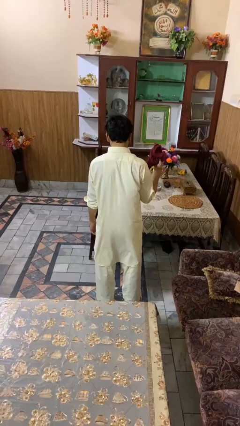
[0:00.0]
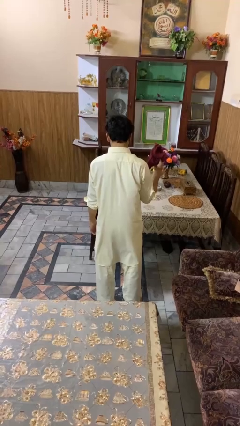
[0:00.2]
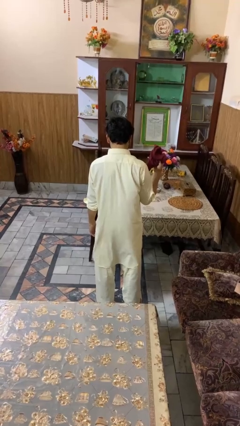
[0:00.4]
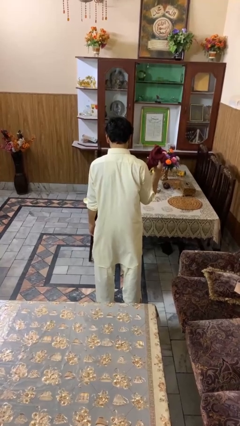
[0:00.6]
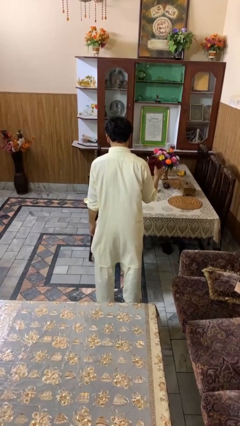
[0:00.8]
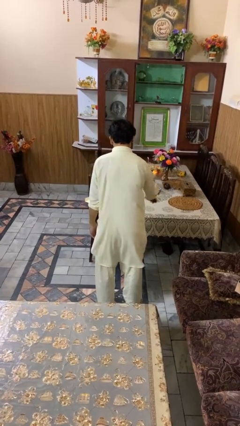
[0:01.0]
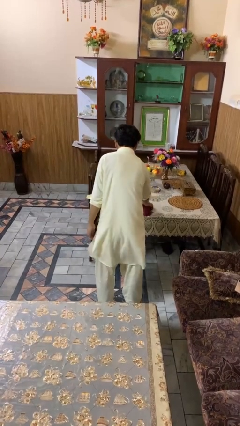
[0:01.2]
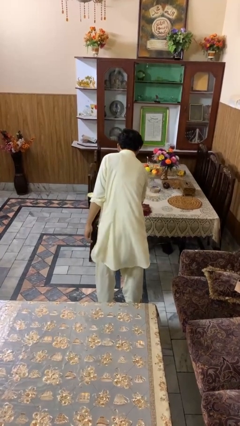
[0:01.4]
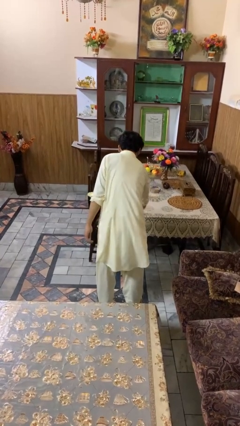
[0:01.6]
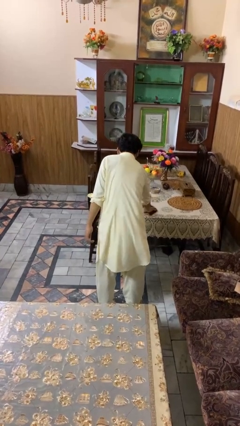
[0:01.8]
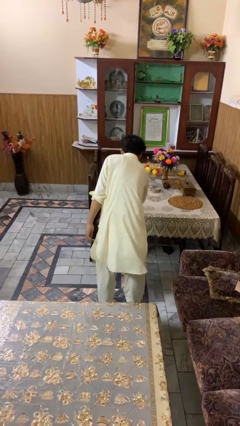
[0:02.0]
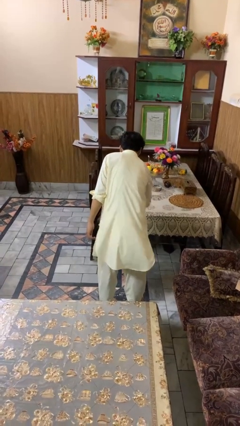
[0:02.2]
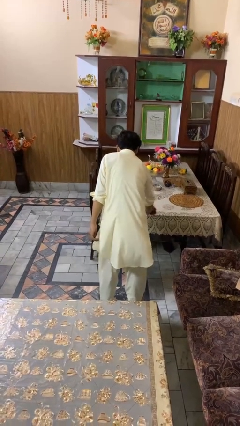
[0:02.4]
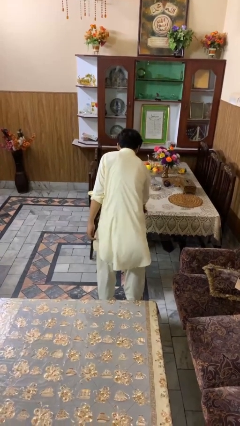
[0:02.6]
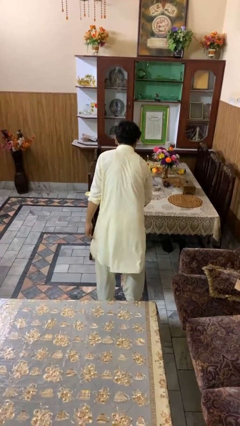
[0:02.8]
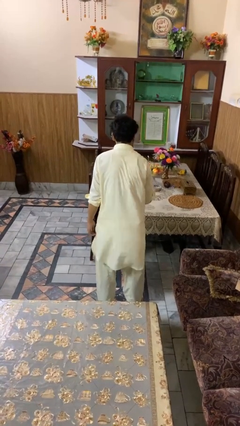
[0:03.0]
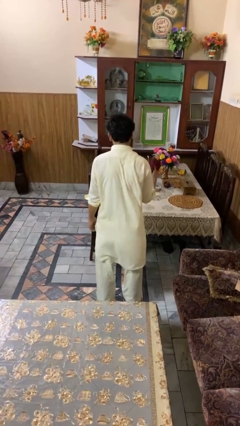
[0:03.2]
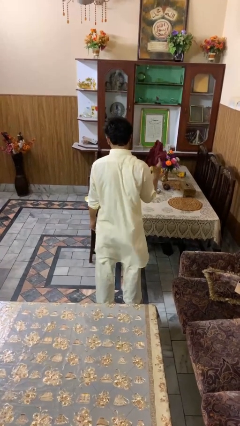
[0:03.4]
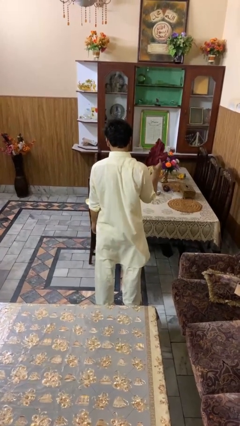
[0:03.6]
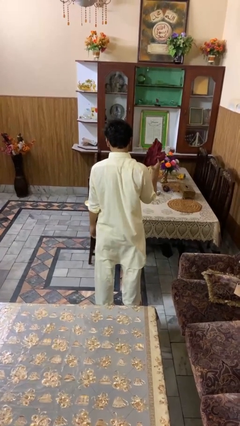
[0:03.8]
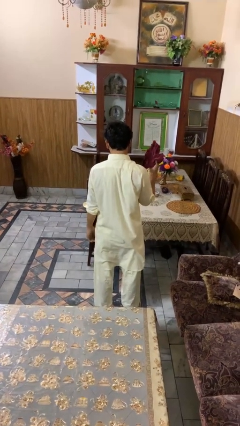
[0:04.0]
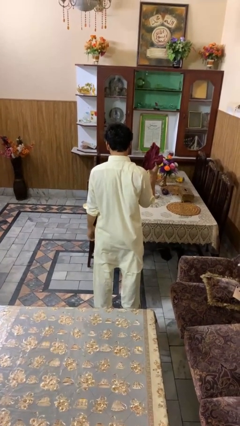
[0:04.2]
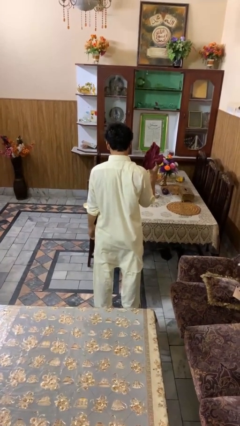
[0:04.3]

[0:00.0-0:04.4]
person cleans table with rag

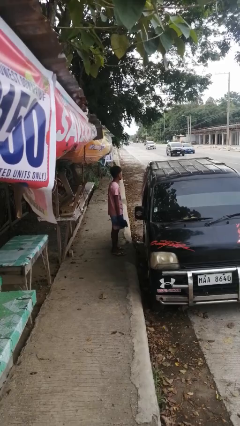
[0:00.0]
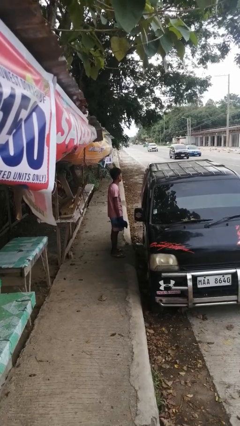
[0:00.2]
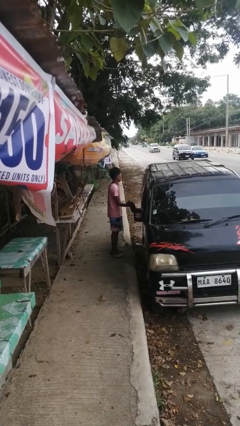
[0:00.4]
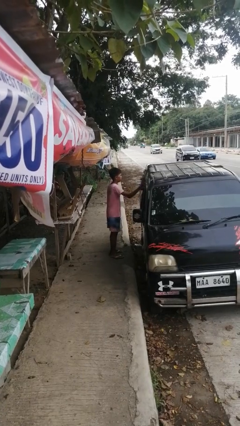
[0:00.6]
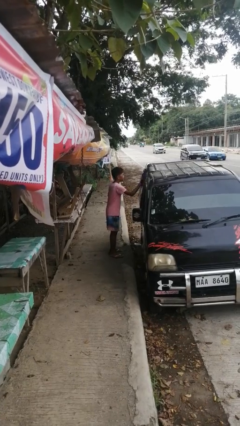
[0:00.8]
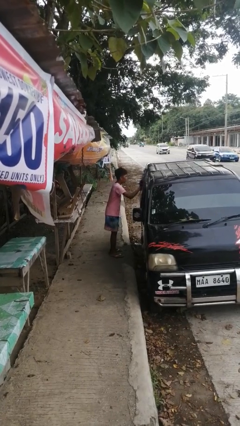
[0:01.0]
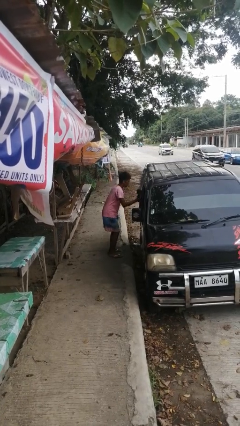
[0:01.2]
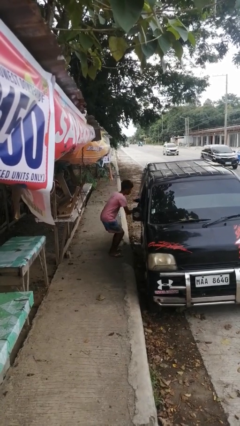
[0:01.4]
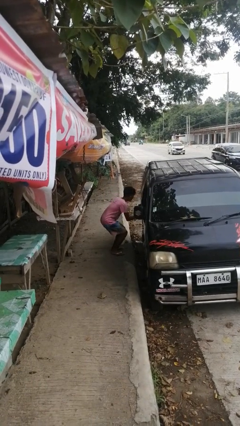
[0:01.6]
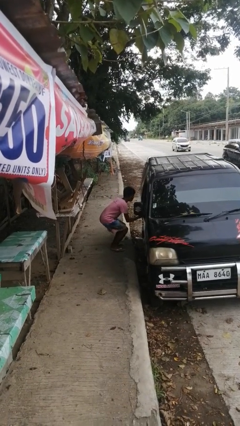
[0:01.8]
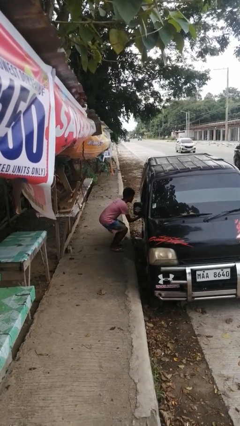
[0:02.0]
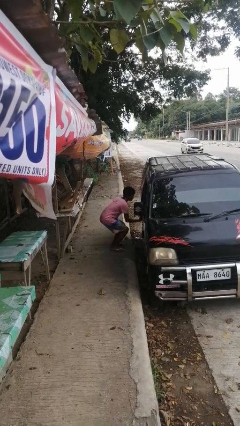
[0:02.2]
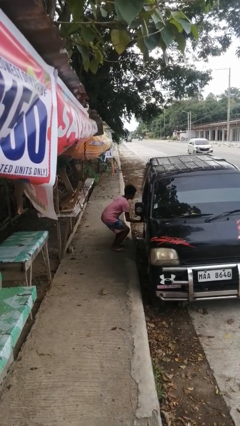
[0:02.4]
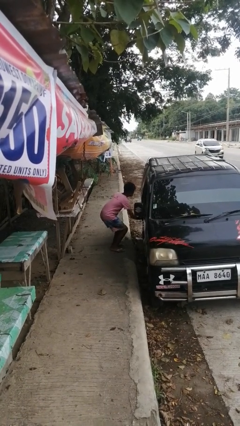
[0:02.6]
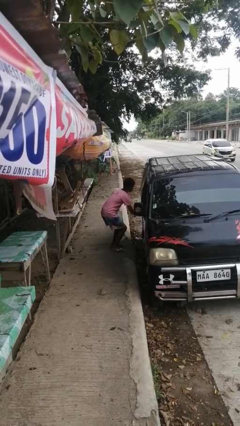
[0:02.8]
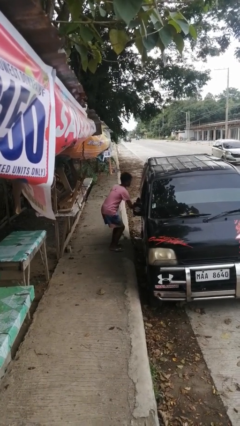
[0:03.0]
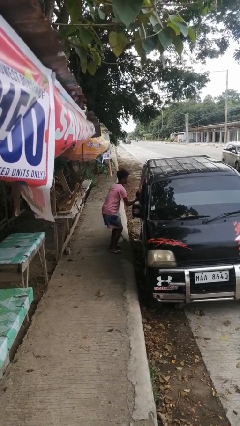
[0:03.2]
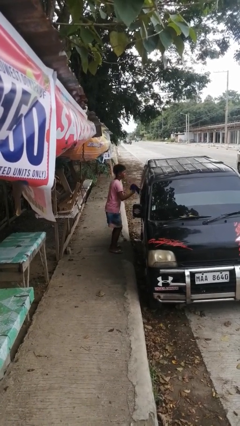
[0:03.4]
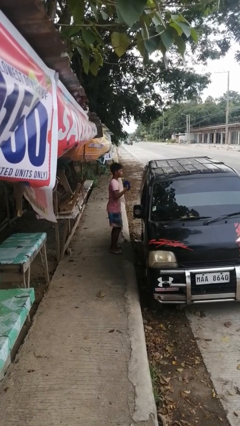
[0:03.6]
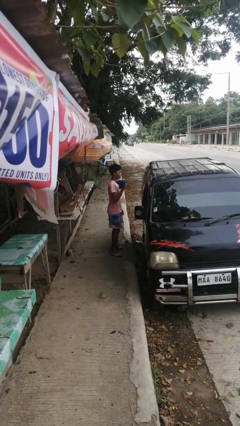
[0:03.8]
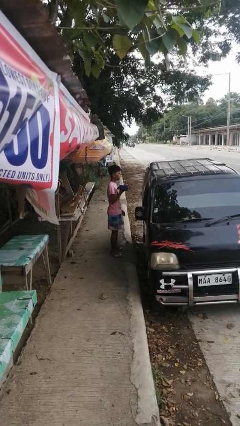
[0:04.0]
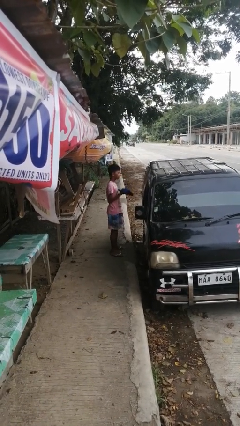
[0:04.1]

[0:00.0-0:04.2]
person polishes car with rag

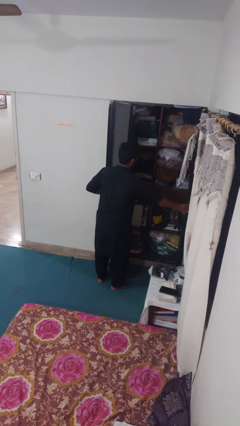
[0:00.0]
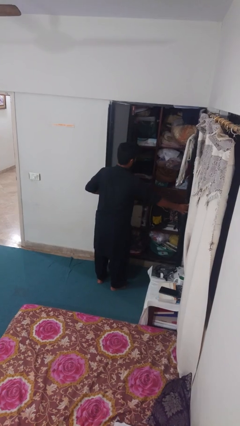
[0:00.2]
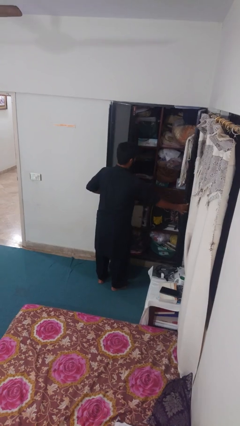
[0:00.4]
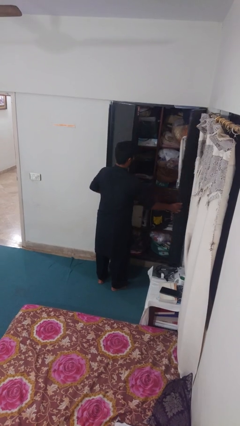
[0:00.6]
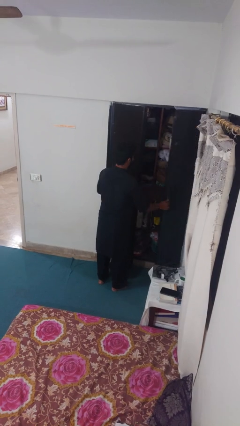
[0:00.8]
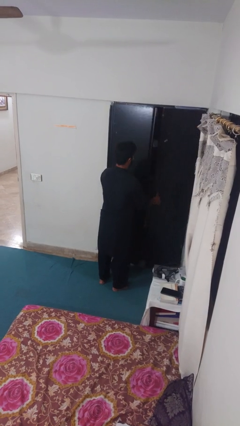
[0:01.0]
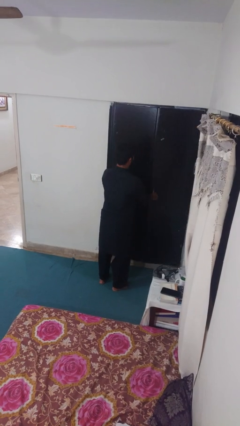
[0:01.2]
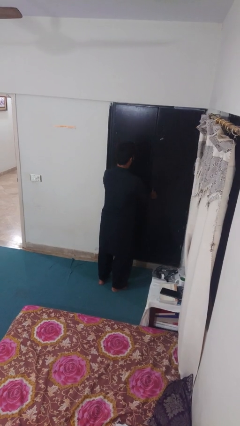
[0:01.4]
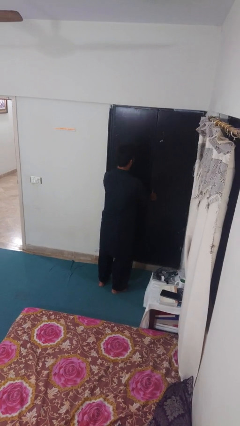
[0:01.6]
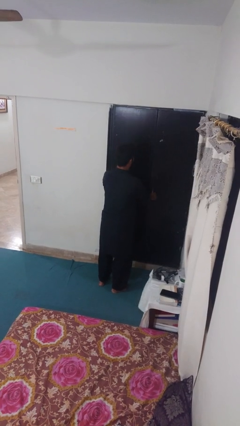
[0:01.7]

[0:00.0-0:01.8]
person closes closet door

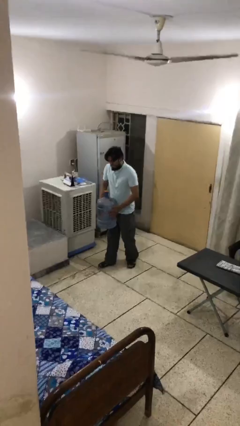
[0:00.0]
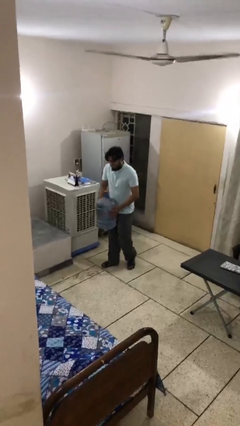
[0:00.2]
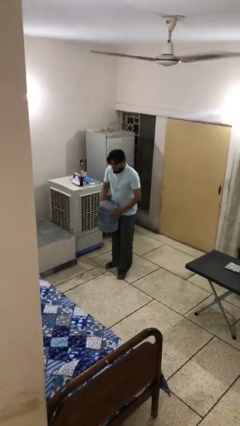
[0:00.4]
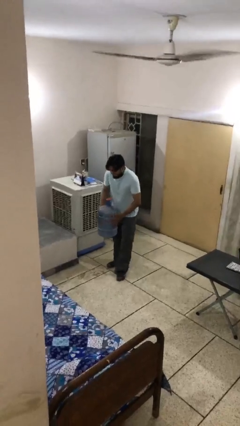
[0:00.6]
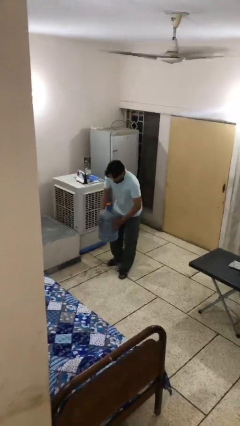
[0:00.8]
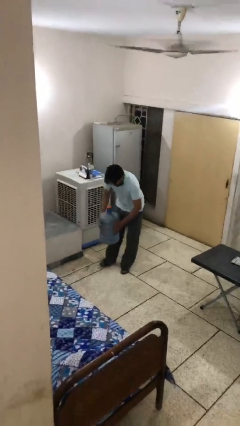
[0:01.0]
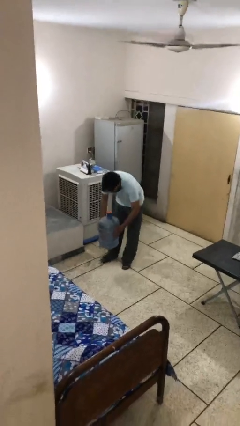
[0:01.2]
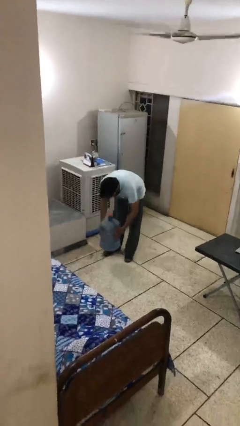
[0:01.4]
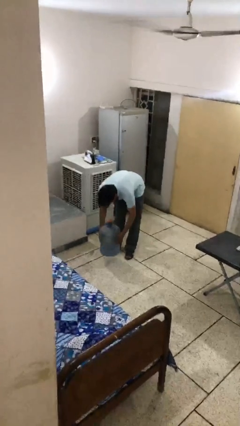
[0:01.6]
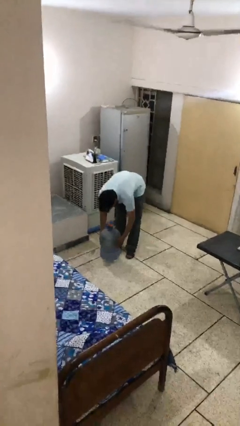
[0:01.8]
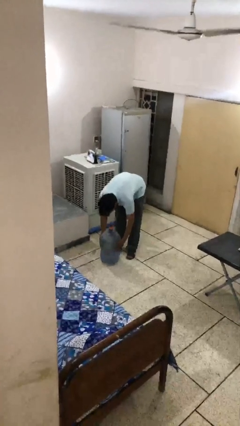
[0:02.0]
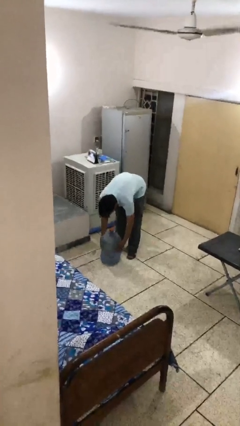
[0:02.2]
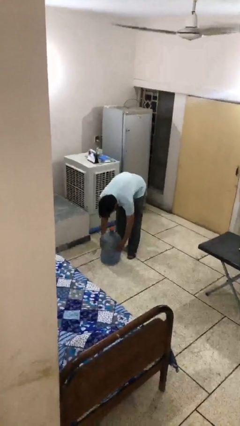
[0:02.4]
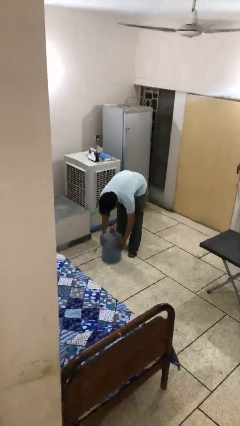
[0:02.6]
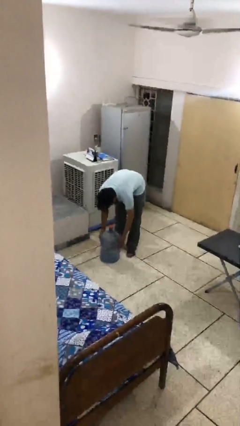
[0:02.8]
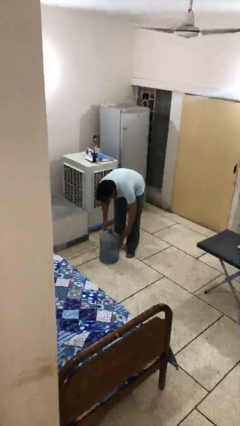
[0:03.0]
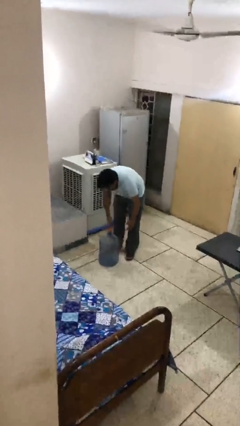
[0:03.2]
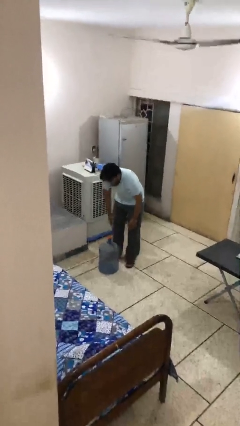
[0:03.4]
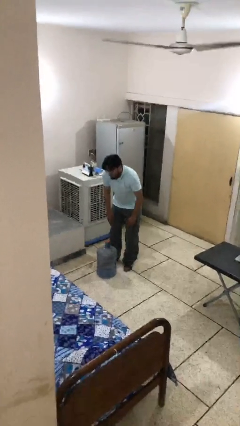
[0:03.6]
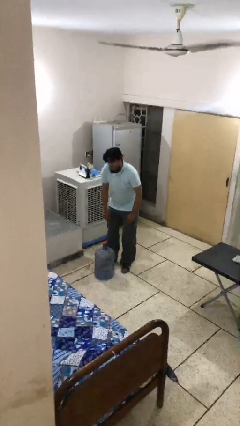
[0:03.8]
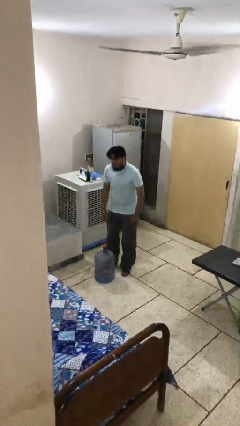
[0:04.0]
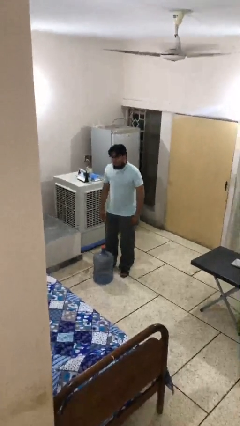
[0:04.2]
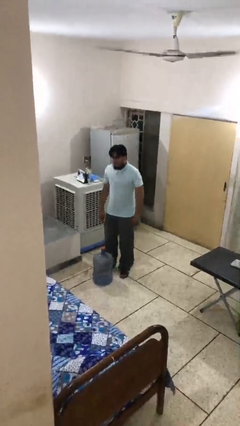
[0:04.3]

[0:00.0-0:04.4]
person puts down object on floor

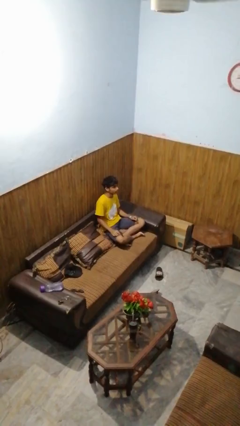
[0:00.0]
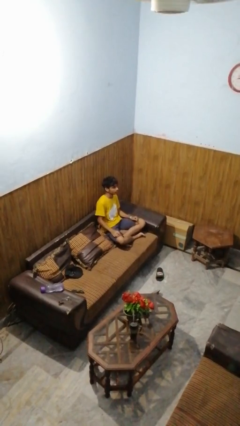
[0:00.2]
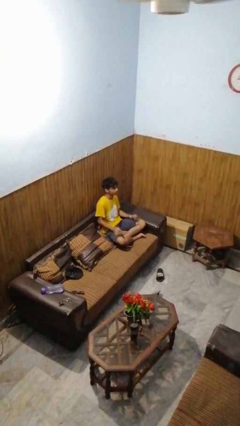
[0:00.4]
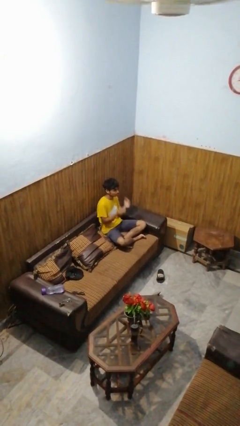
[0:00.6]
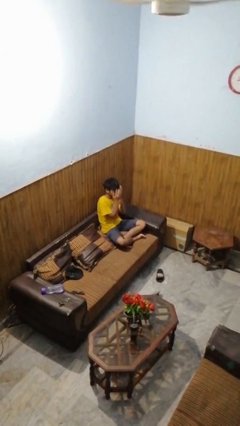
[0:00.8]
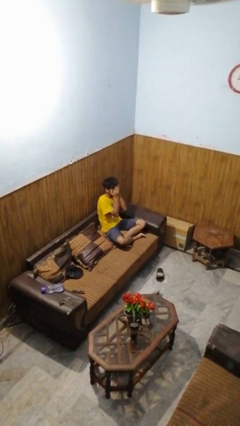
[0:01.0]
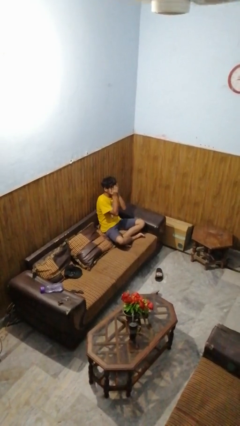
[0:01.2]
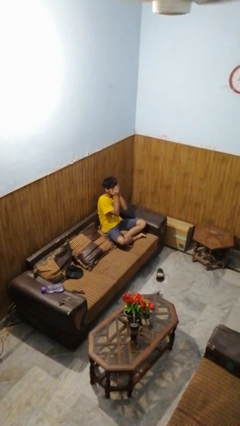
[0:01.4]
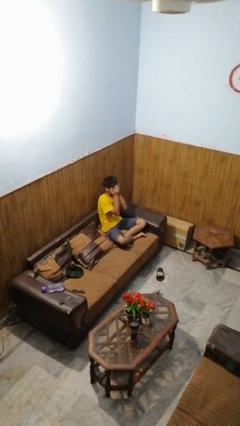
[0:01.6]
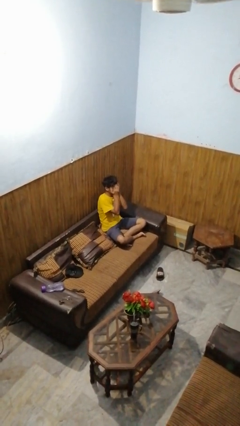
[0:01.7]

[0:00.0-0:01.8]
person covers face with hands

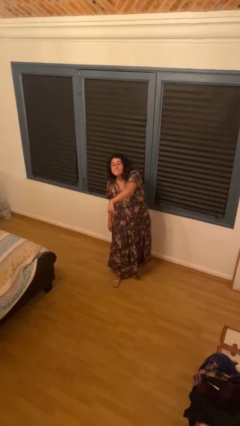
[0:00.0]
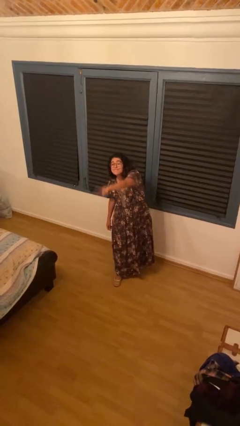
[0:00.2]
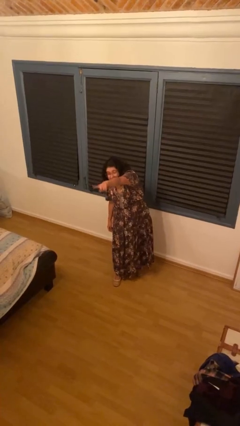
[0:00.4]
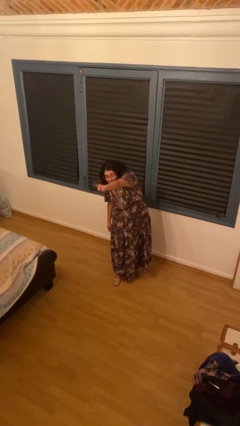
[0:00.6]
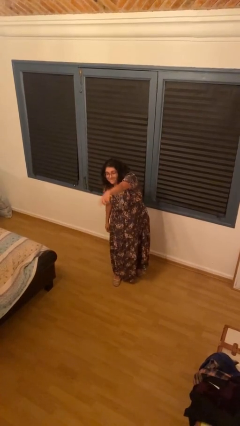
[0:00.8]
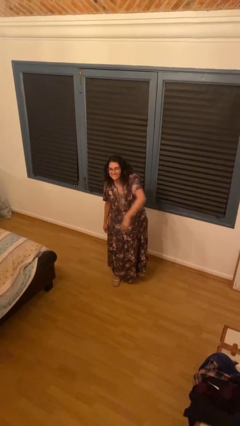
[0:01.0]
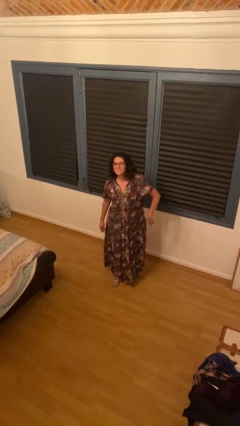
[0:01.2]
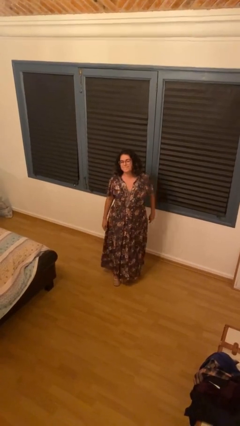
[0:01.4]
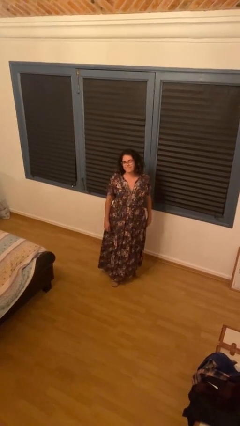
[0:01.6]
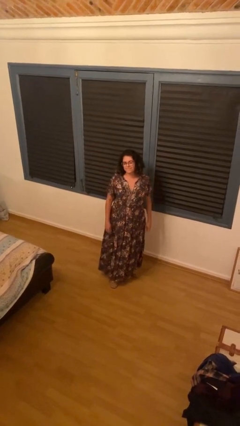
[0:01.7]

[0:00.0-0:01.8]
person points at person
